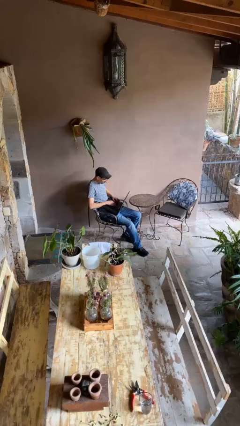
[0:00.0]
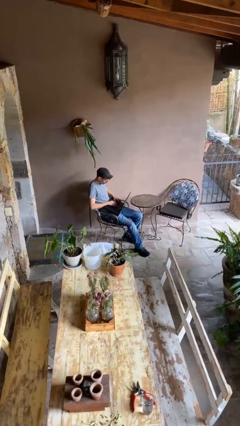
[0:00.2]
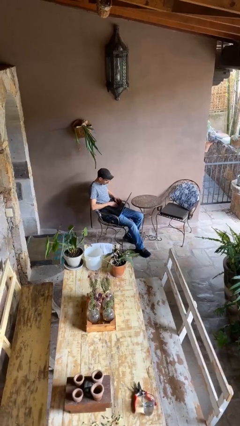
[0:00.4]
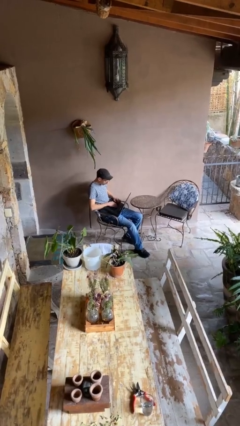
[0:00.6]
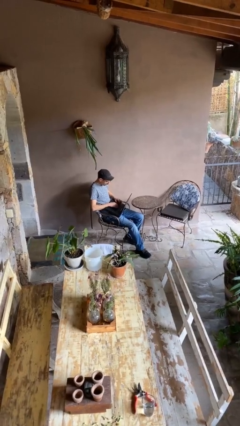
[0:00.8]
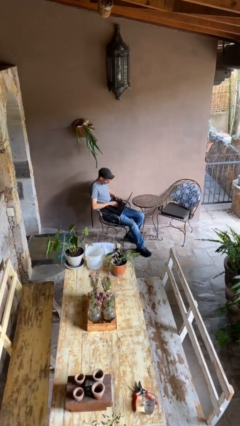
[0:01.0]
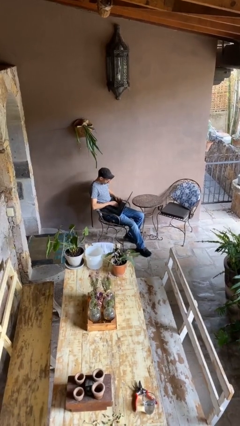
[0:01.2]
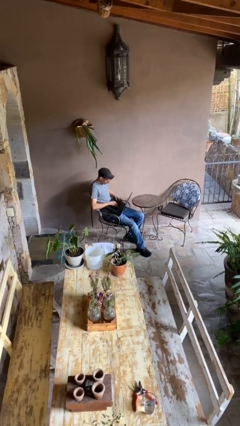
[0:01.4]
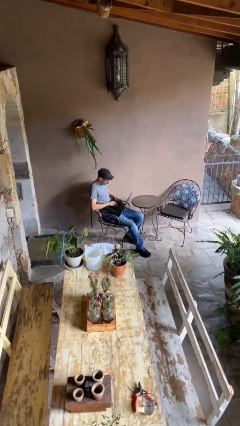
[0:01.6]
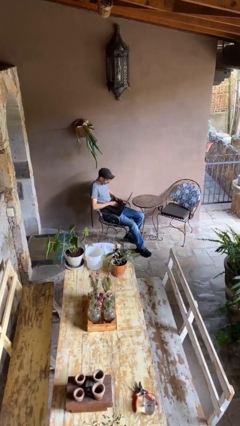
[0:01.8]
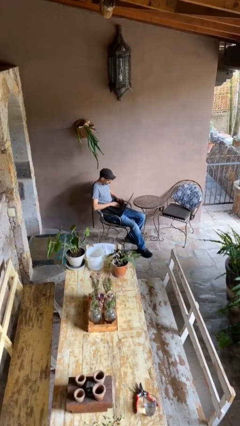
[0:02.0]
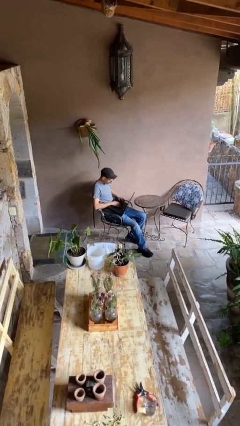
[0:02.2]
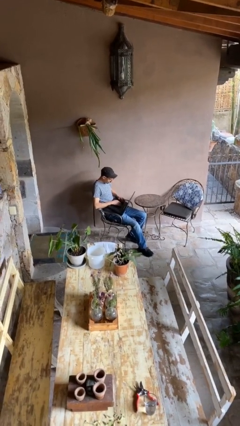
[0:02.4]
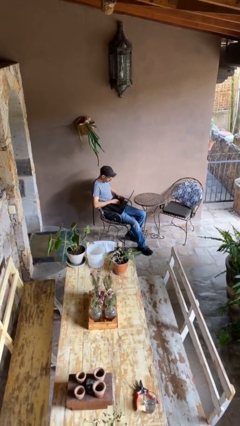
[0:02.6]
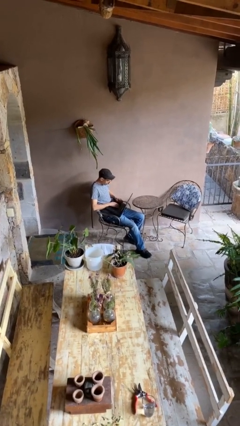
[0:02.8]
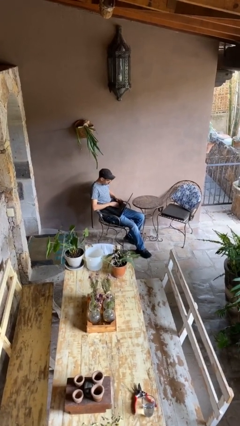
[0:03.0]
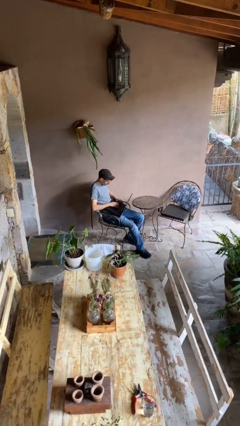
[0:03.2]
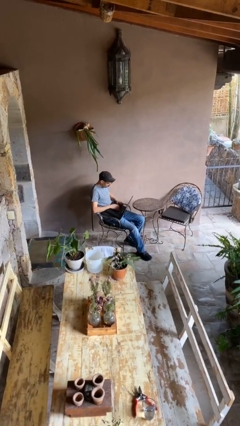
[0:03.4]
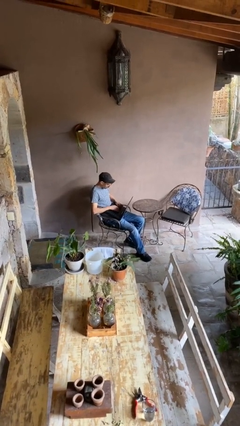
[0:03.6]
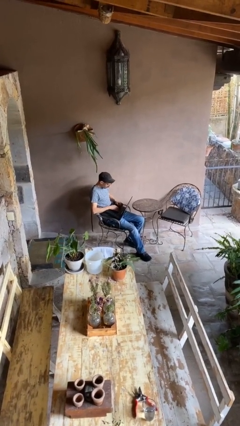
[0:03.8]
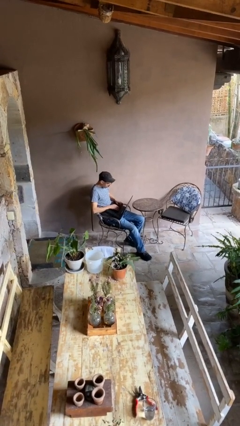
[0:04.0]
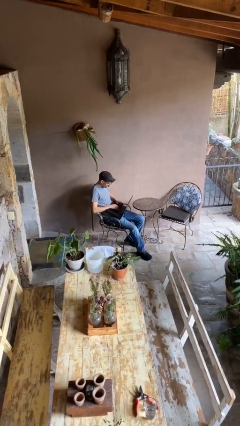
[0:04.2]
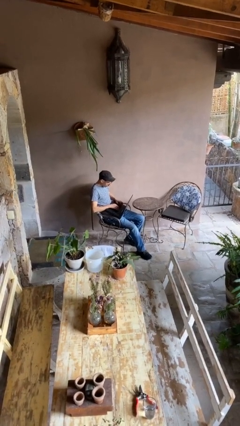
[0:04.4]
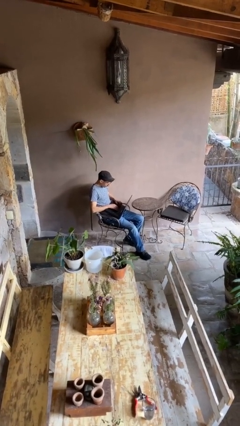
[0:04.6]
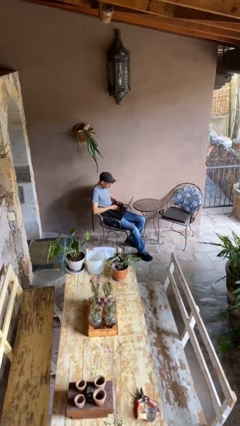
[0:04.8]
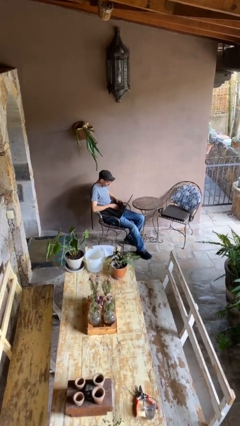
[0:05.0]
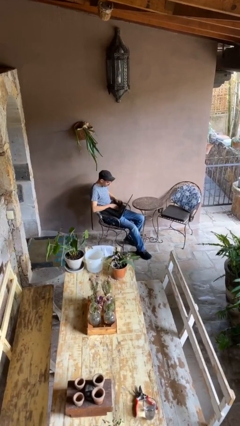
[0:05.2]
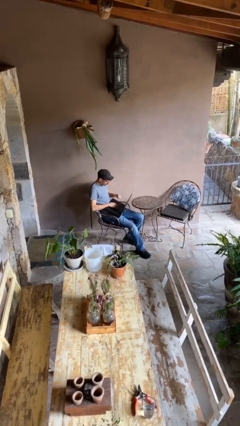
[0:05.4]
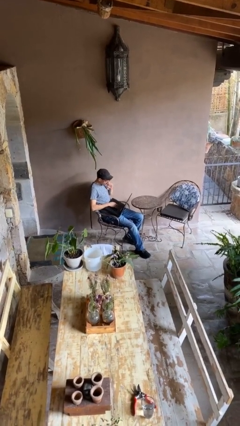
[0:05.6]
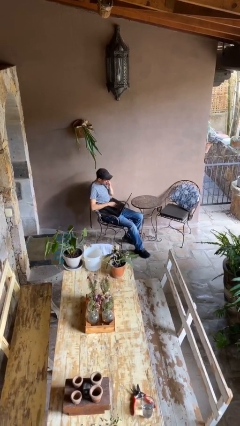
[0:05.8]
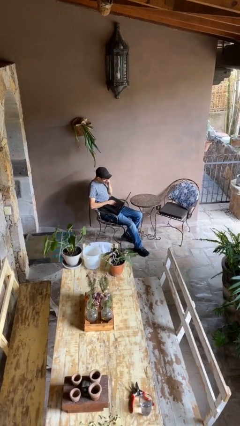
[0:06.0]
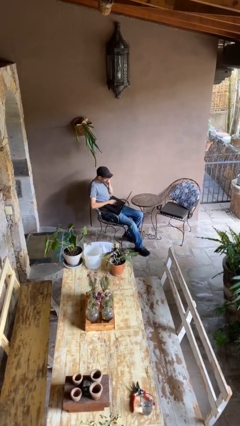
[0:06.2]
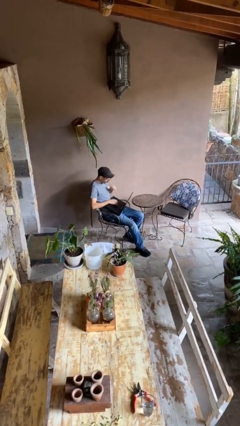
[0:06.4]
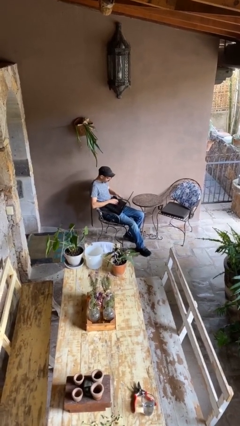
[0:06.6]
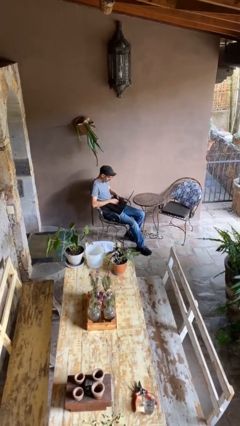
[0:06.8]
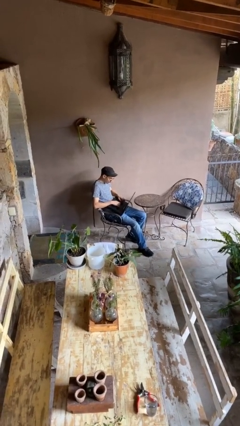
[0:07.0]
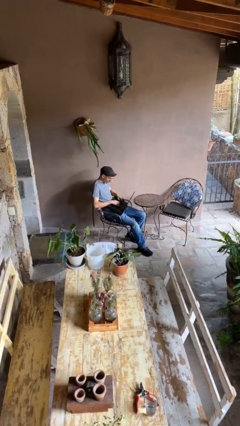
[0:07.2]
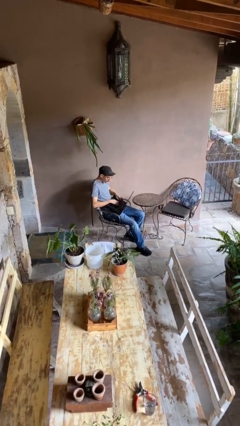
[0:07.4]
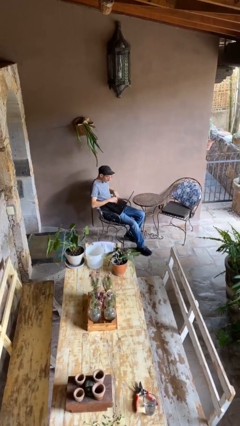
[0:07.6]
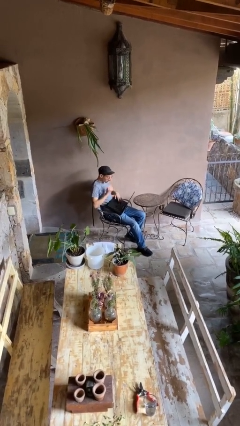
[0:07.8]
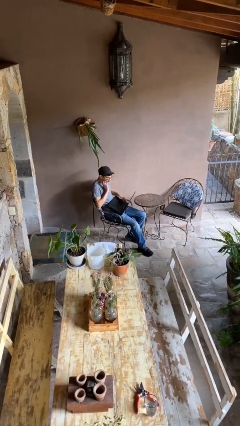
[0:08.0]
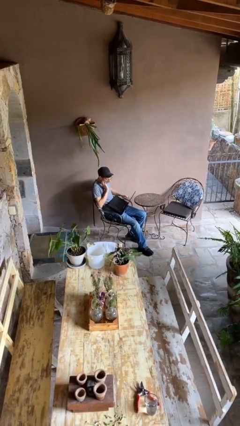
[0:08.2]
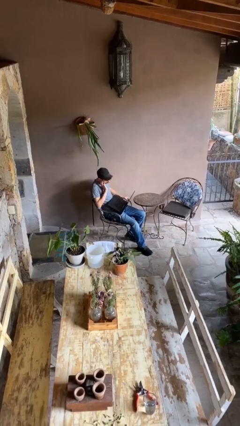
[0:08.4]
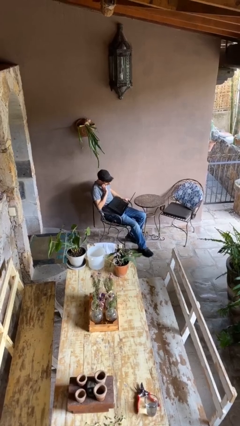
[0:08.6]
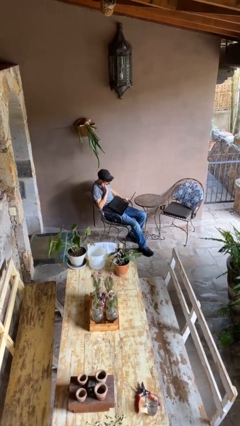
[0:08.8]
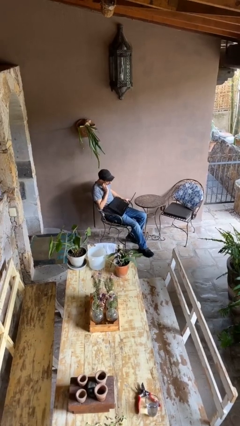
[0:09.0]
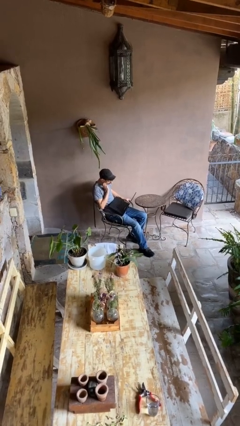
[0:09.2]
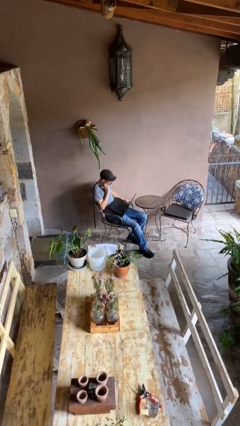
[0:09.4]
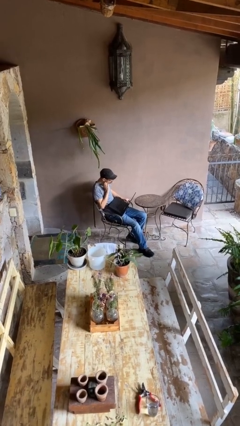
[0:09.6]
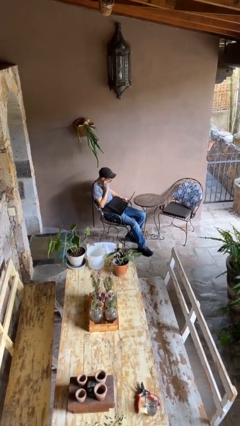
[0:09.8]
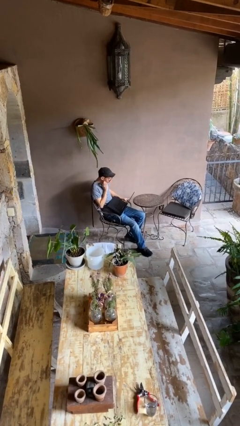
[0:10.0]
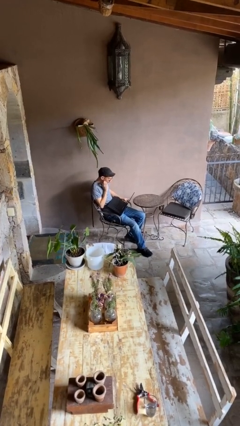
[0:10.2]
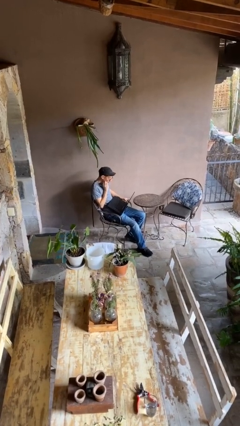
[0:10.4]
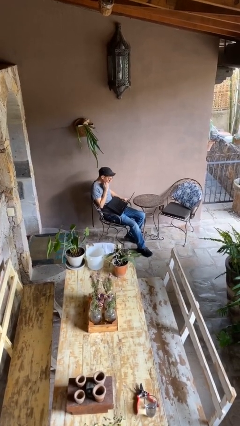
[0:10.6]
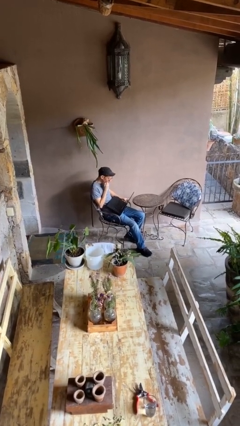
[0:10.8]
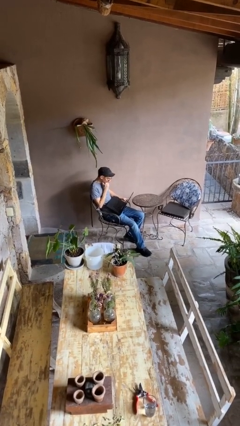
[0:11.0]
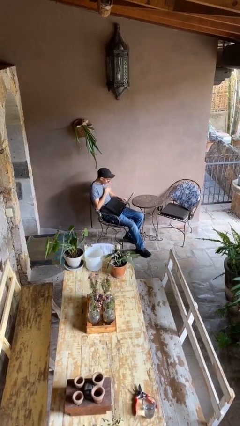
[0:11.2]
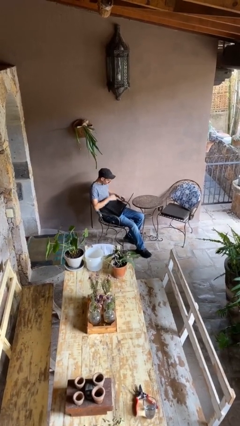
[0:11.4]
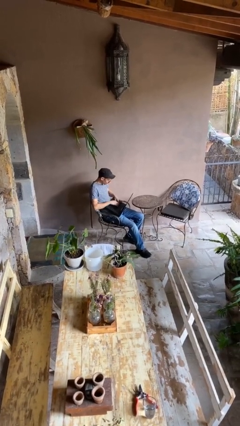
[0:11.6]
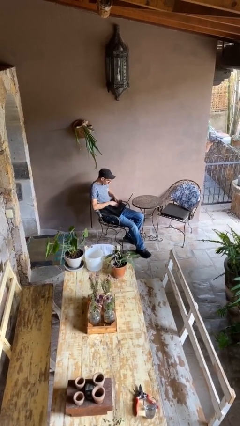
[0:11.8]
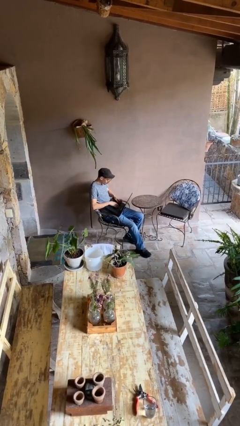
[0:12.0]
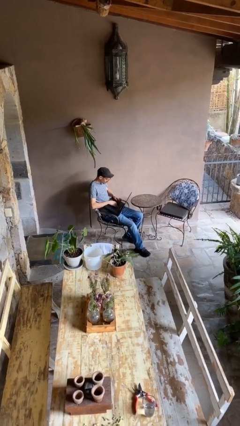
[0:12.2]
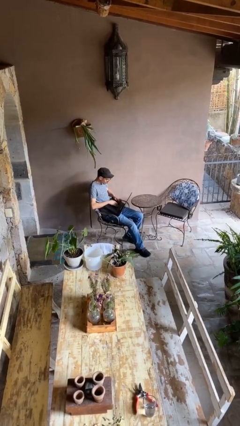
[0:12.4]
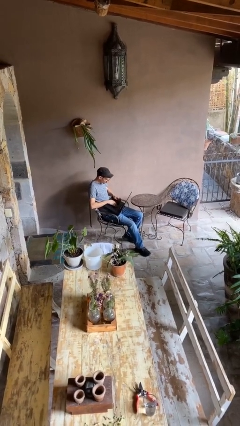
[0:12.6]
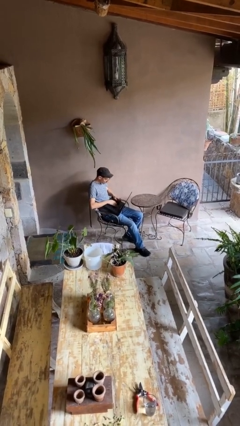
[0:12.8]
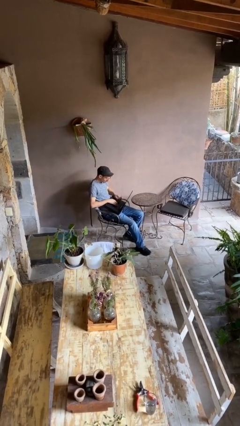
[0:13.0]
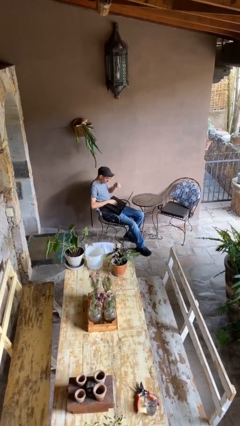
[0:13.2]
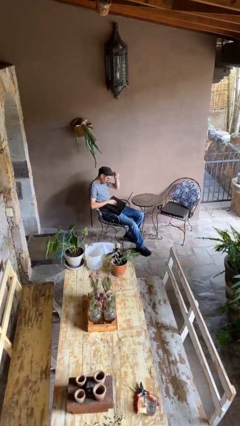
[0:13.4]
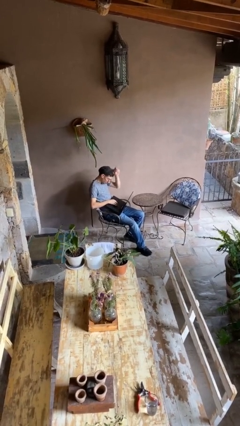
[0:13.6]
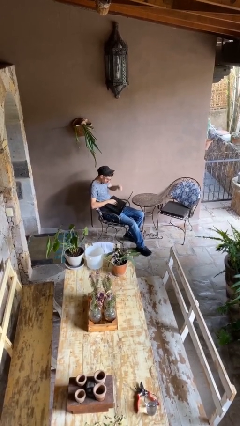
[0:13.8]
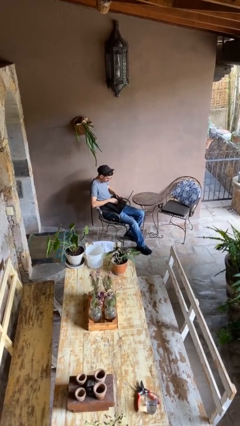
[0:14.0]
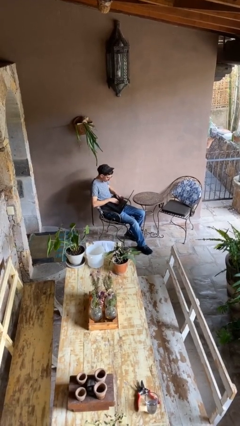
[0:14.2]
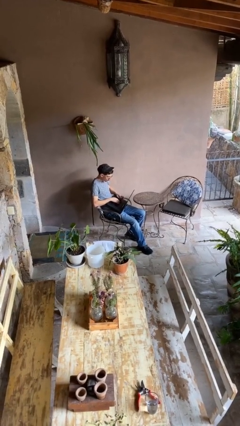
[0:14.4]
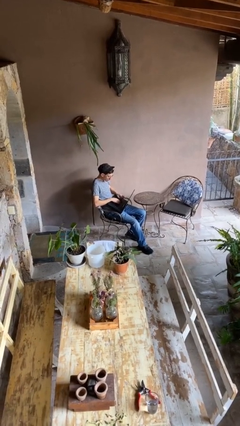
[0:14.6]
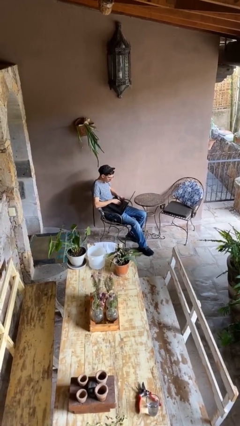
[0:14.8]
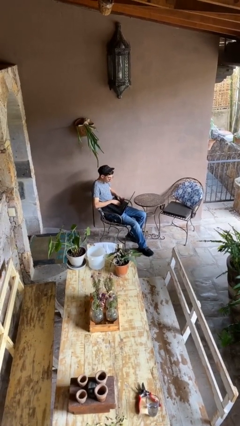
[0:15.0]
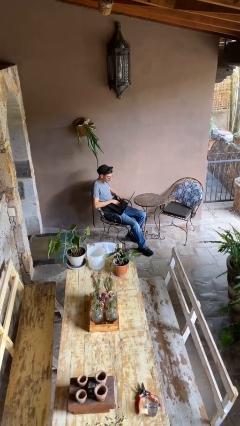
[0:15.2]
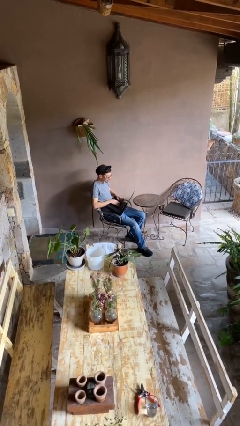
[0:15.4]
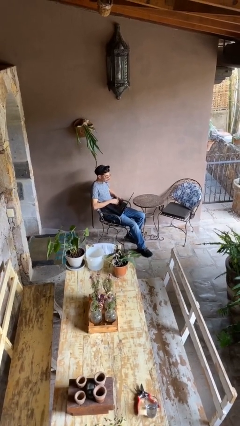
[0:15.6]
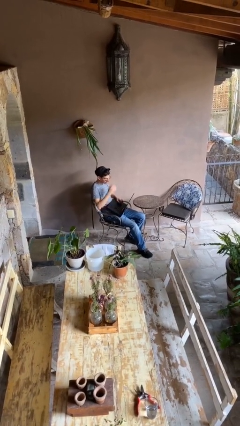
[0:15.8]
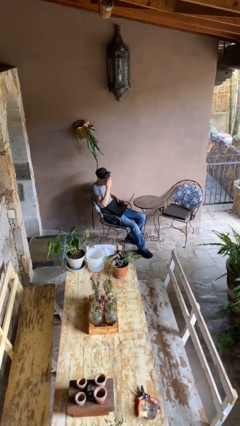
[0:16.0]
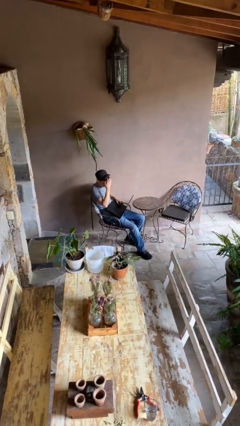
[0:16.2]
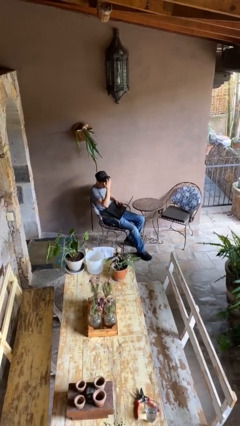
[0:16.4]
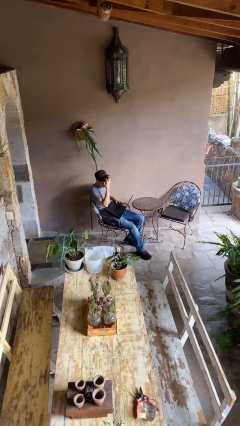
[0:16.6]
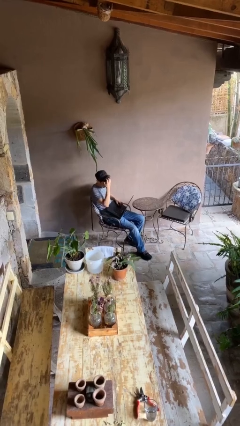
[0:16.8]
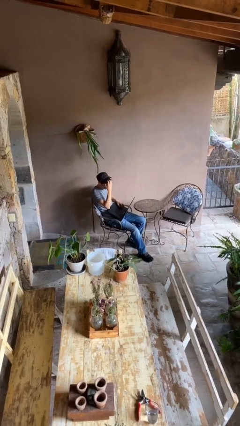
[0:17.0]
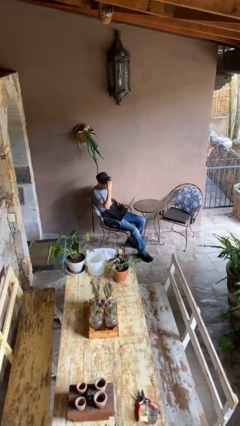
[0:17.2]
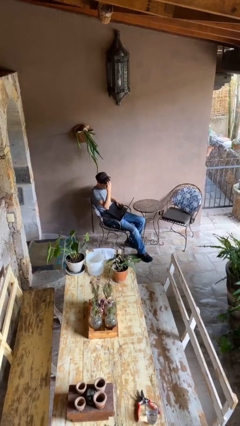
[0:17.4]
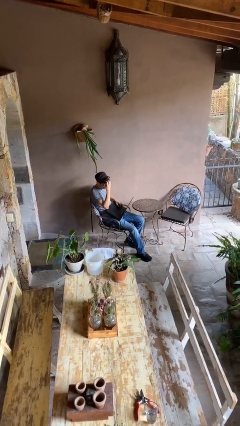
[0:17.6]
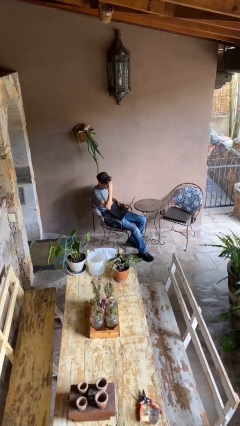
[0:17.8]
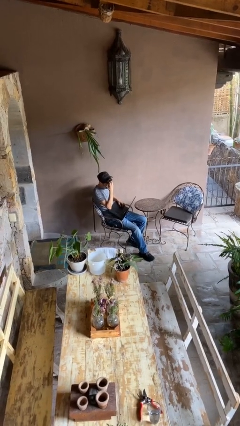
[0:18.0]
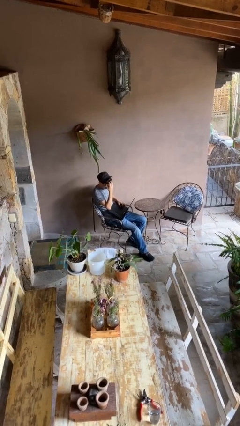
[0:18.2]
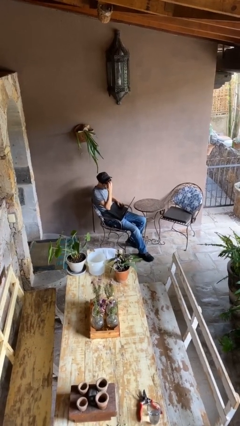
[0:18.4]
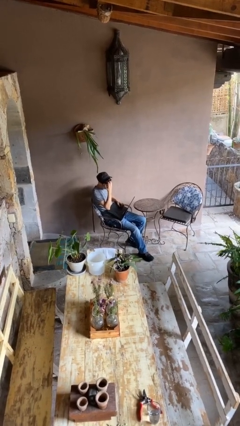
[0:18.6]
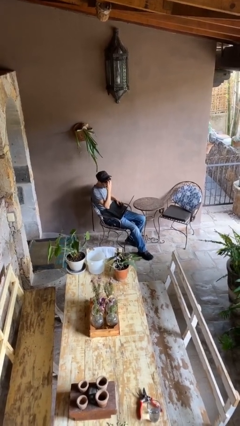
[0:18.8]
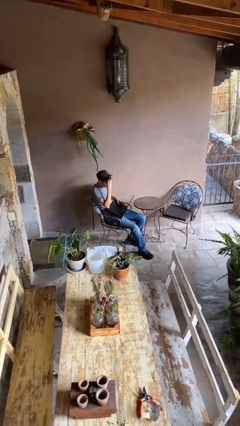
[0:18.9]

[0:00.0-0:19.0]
person interacts with laptop
